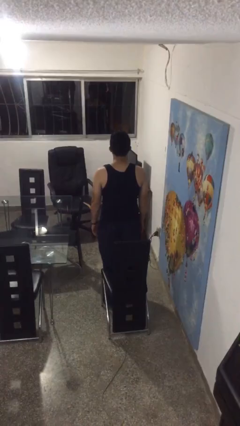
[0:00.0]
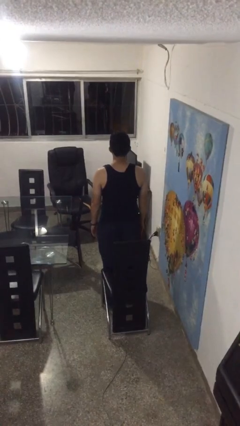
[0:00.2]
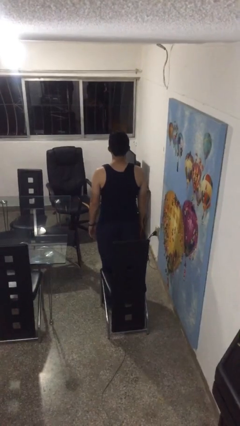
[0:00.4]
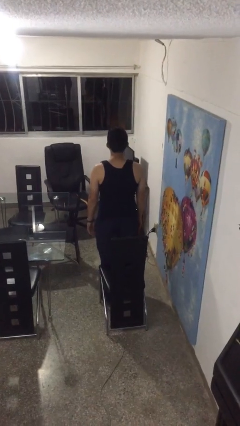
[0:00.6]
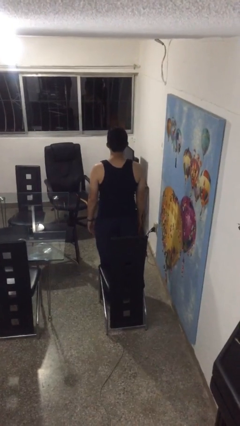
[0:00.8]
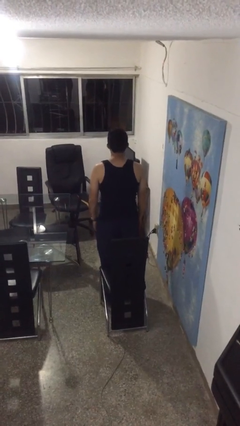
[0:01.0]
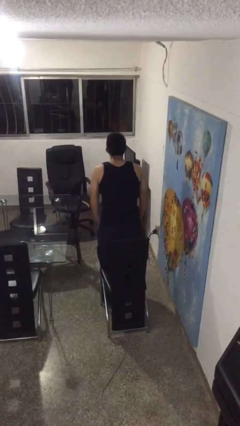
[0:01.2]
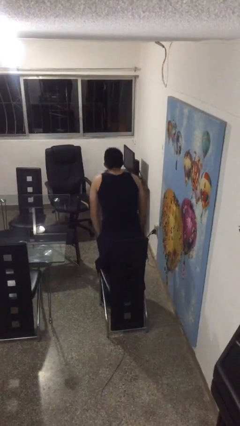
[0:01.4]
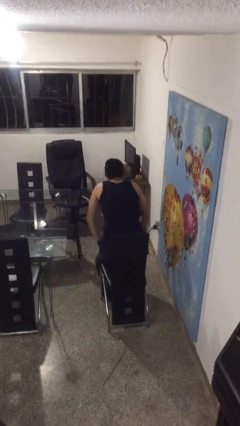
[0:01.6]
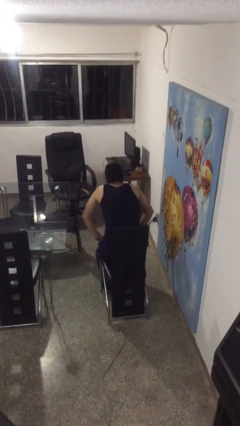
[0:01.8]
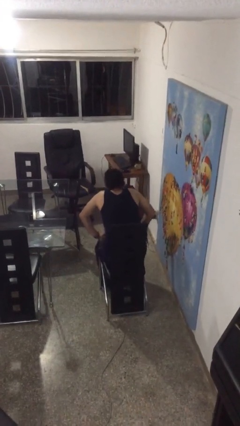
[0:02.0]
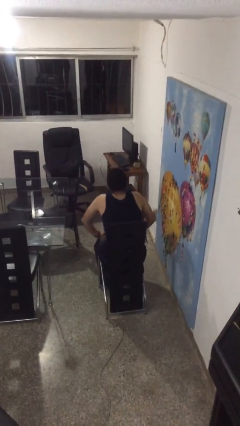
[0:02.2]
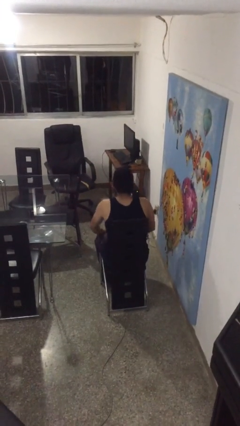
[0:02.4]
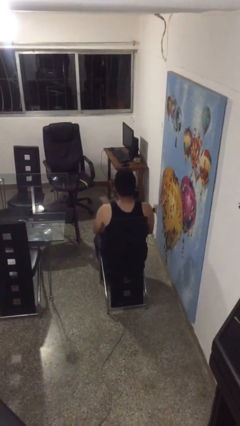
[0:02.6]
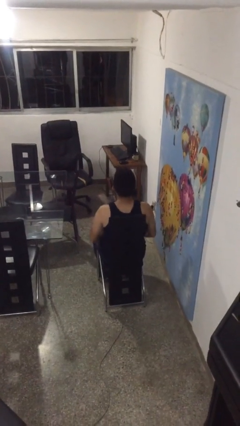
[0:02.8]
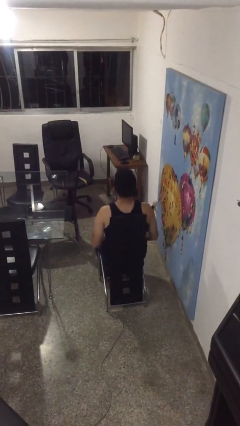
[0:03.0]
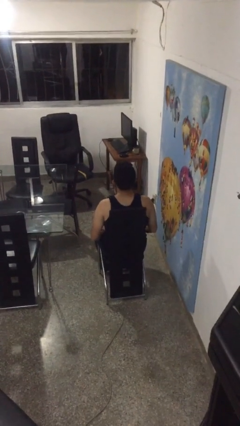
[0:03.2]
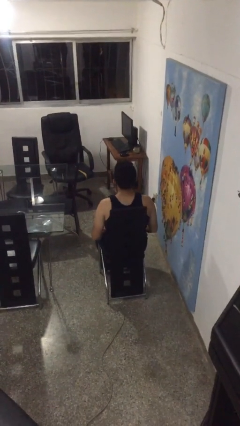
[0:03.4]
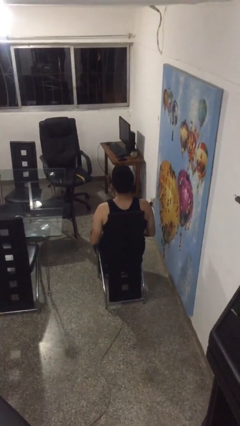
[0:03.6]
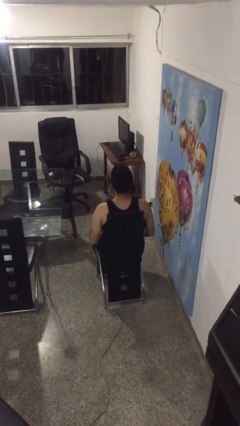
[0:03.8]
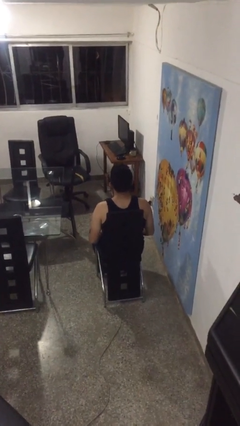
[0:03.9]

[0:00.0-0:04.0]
person sits down

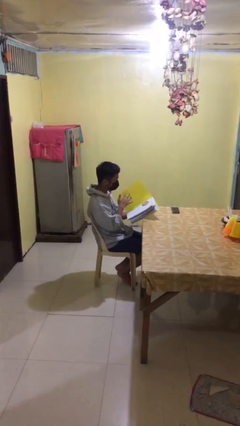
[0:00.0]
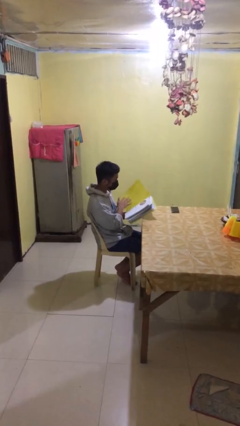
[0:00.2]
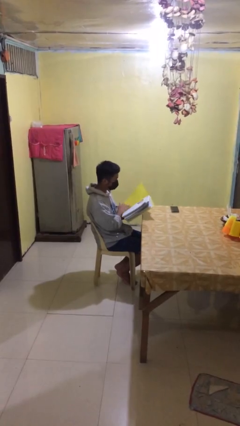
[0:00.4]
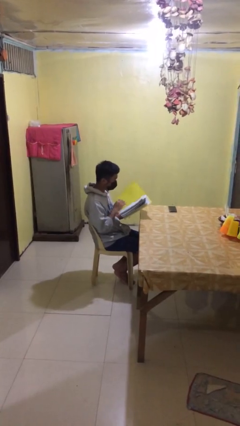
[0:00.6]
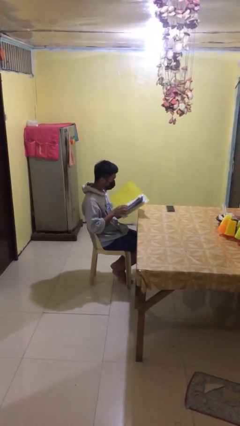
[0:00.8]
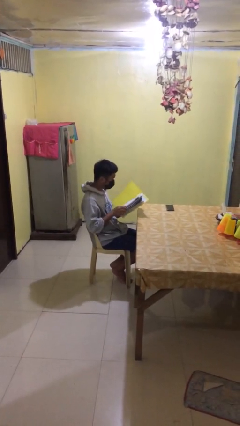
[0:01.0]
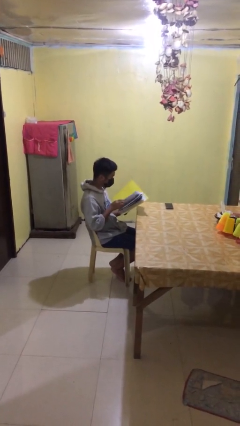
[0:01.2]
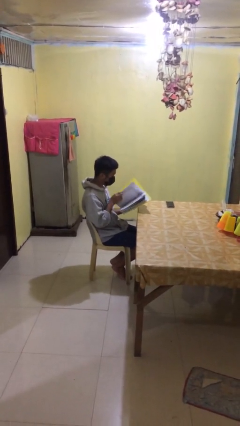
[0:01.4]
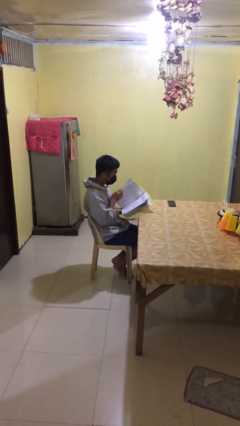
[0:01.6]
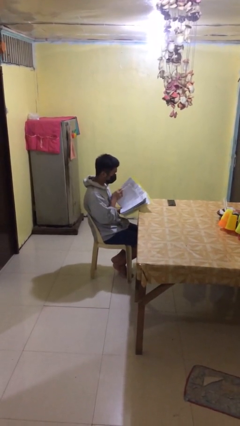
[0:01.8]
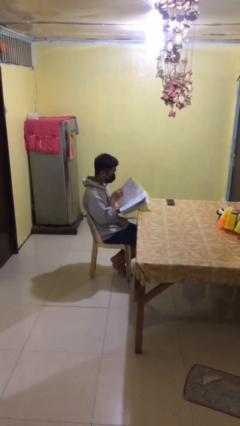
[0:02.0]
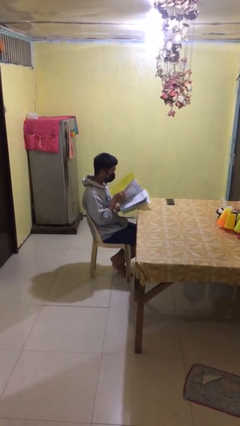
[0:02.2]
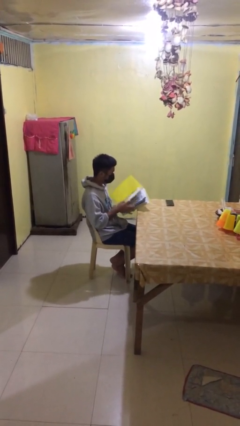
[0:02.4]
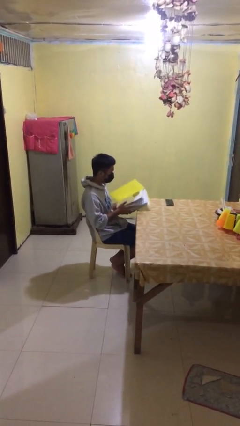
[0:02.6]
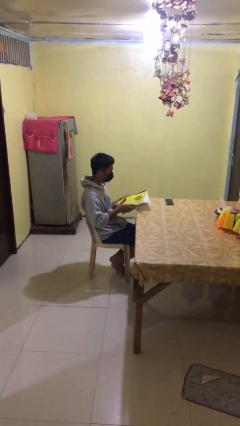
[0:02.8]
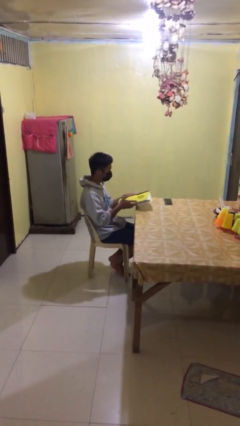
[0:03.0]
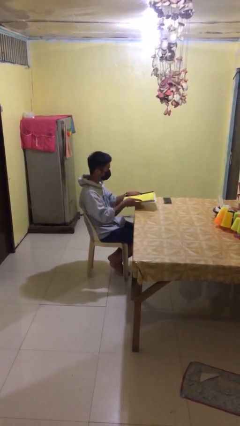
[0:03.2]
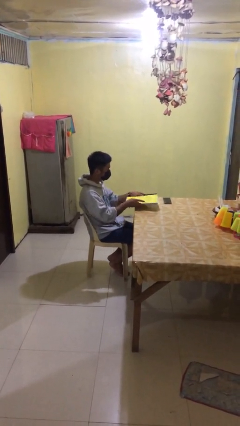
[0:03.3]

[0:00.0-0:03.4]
person reads document

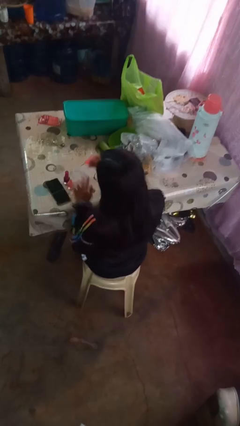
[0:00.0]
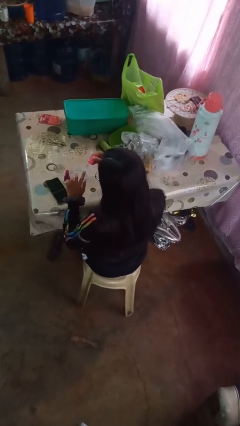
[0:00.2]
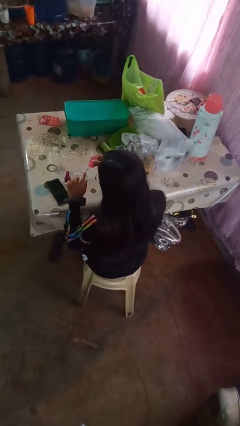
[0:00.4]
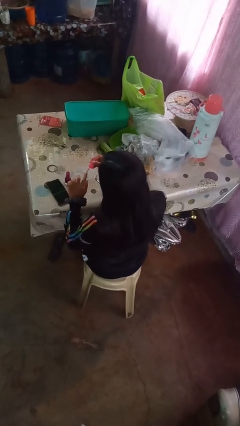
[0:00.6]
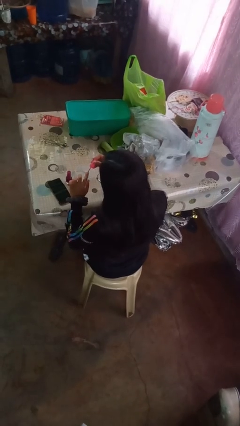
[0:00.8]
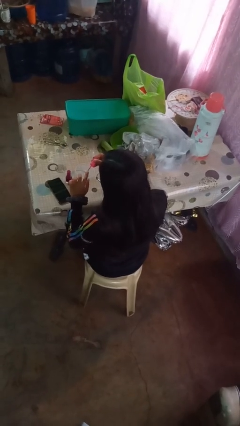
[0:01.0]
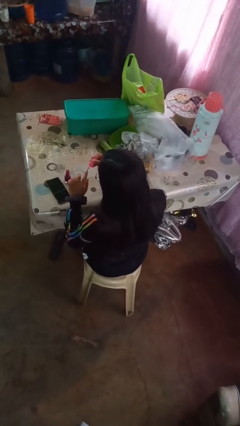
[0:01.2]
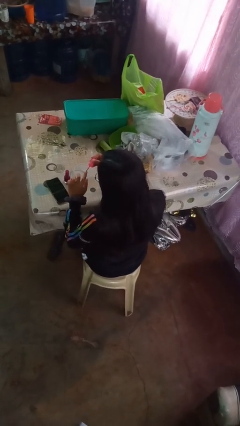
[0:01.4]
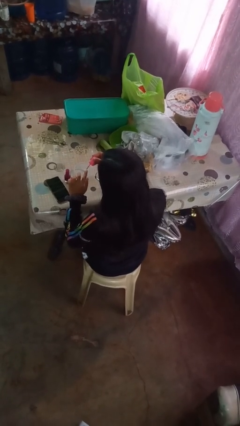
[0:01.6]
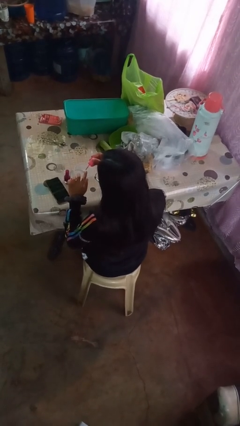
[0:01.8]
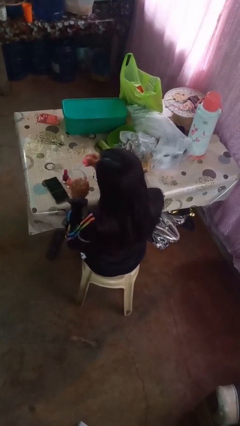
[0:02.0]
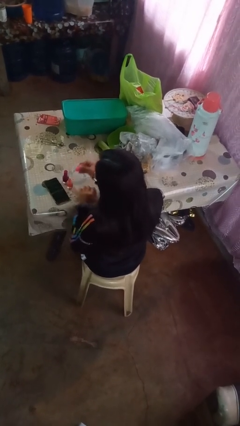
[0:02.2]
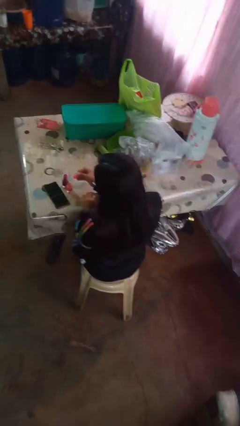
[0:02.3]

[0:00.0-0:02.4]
person paints fingernails

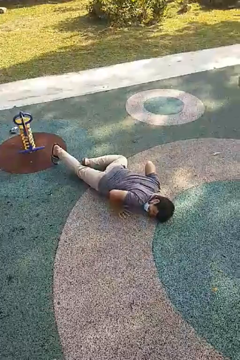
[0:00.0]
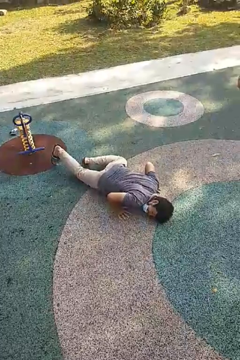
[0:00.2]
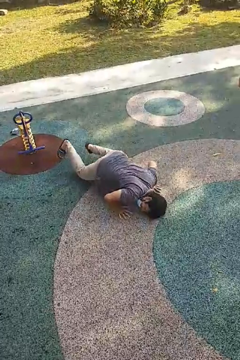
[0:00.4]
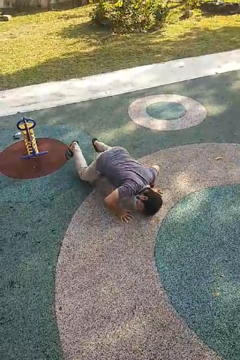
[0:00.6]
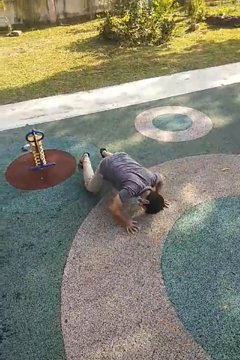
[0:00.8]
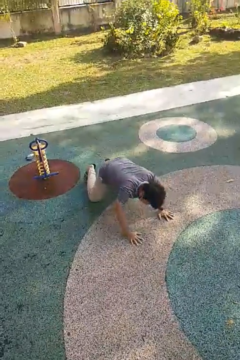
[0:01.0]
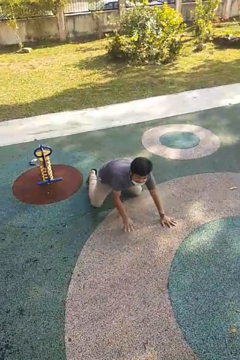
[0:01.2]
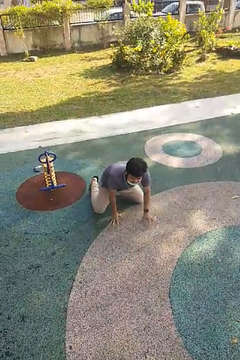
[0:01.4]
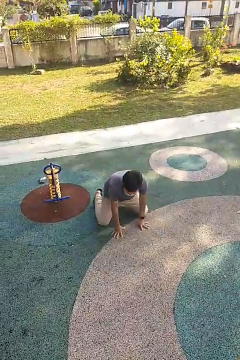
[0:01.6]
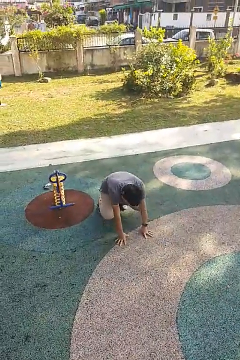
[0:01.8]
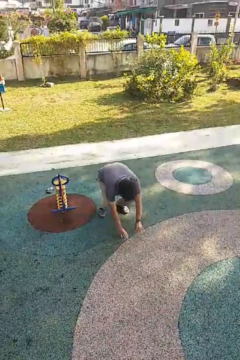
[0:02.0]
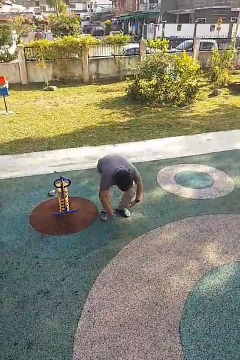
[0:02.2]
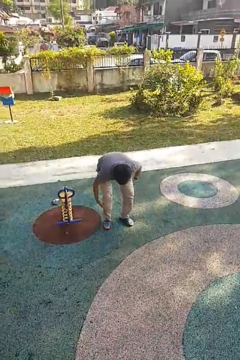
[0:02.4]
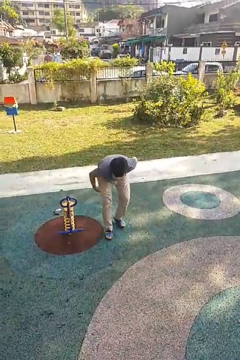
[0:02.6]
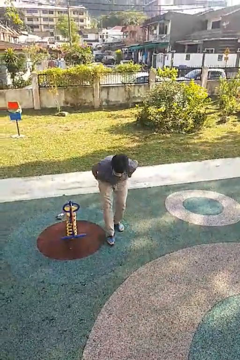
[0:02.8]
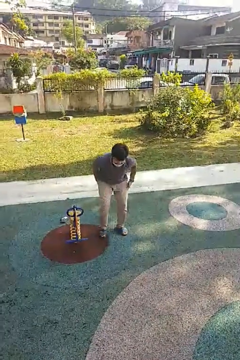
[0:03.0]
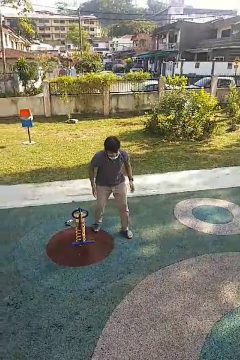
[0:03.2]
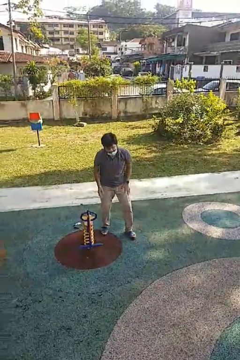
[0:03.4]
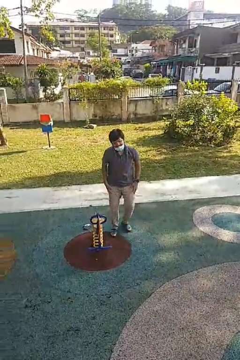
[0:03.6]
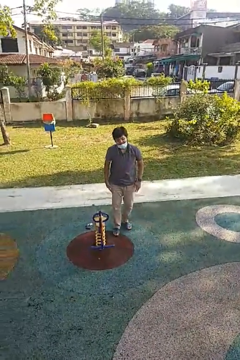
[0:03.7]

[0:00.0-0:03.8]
person stands up from floor

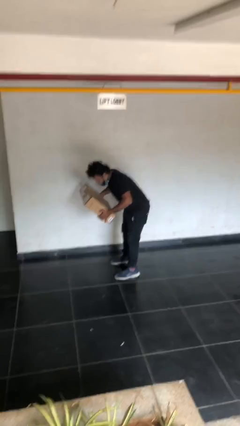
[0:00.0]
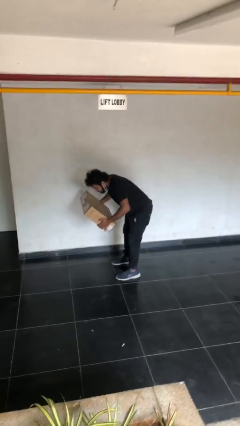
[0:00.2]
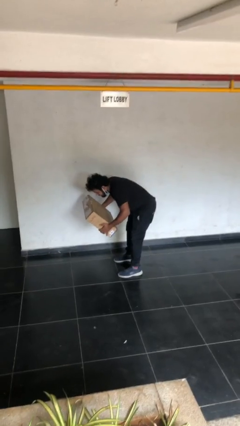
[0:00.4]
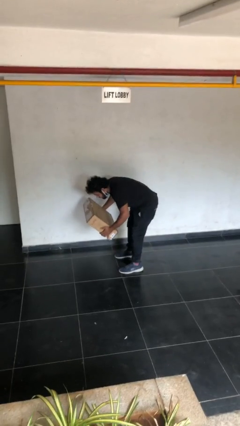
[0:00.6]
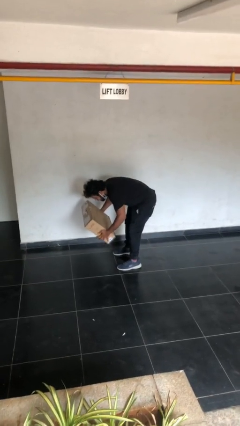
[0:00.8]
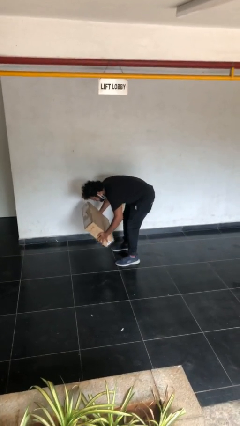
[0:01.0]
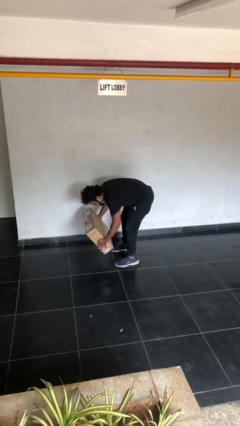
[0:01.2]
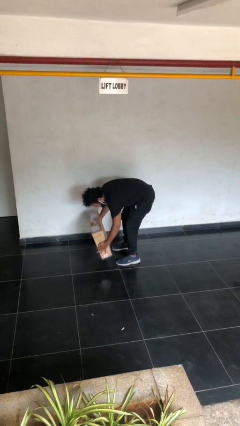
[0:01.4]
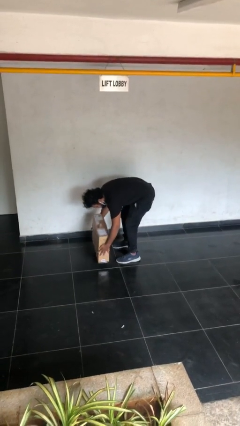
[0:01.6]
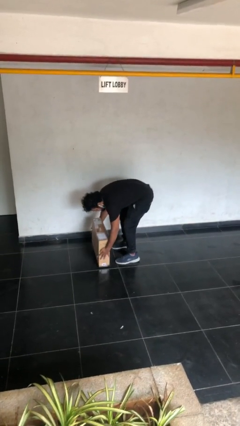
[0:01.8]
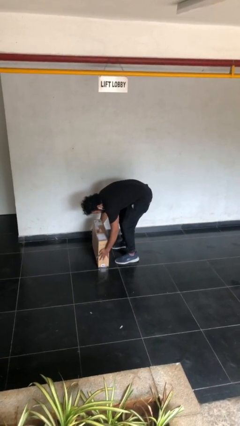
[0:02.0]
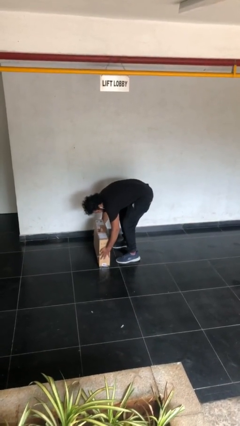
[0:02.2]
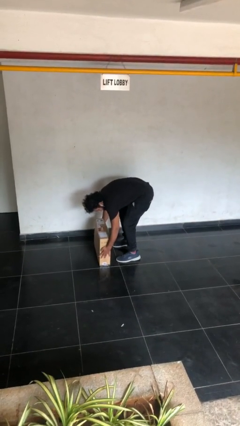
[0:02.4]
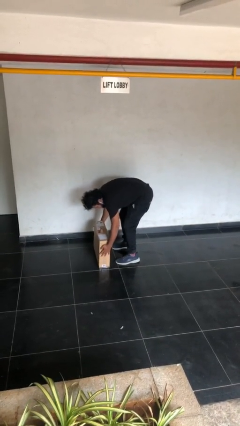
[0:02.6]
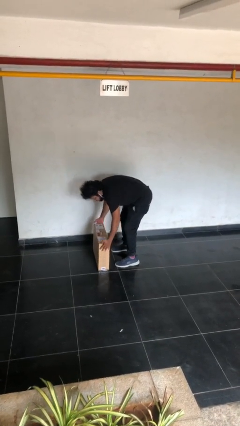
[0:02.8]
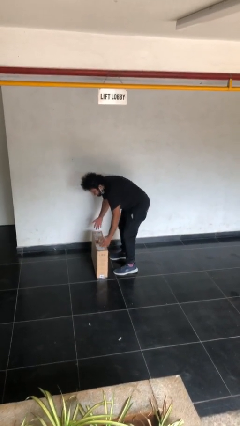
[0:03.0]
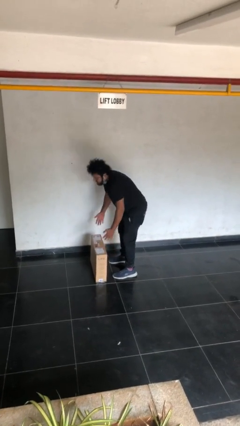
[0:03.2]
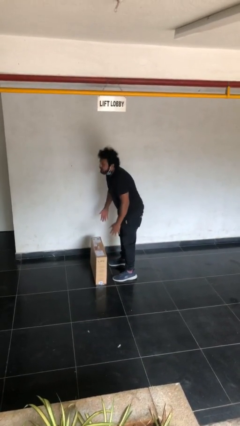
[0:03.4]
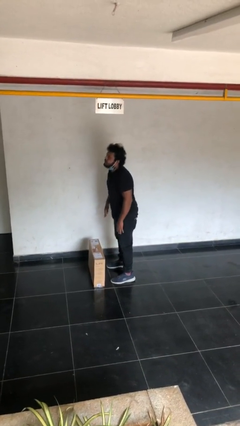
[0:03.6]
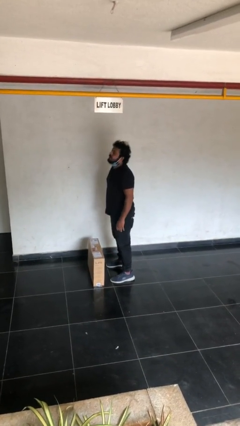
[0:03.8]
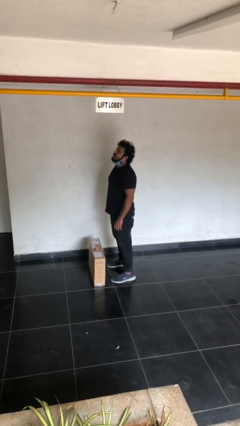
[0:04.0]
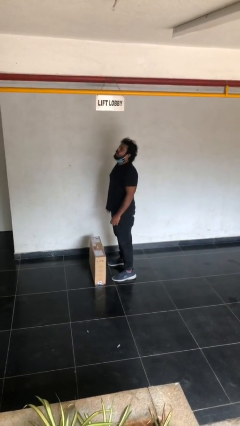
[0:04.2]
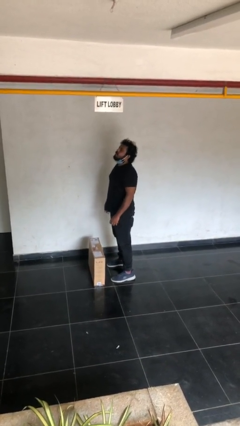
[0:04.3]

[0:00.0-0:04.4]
person puts down object on floor

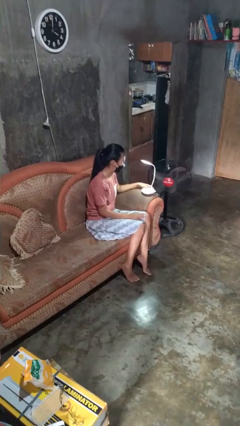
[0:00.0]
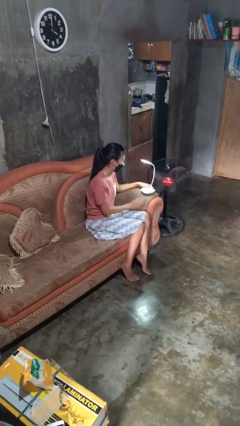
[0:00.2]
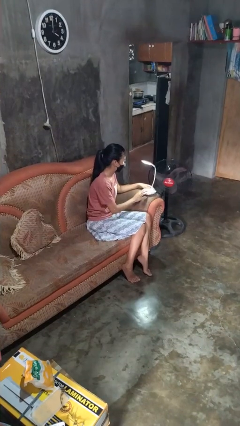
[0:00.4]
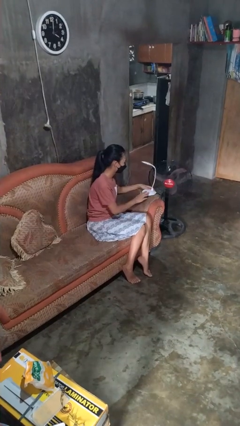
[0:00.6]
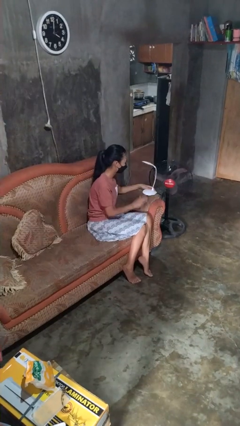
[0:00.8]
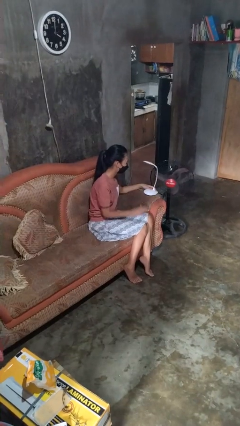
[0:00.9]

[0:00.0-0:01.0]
person turns off lamp
